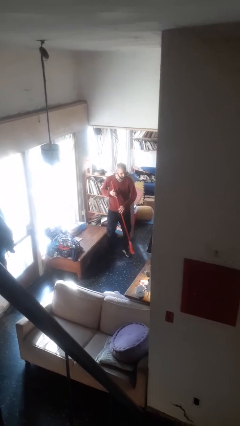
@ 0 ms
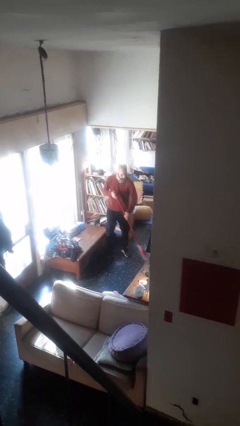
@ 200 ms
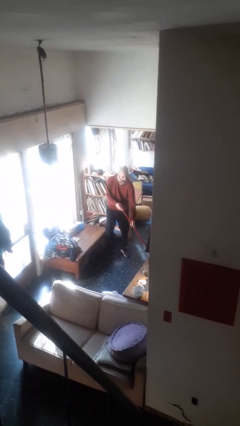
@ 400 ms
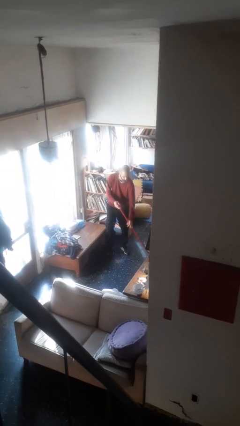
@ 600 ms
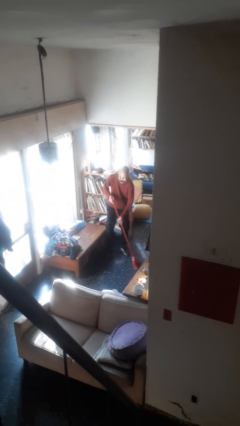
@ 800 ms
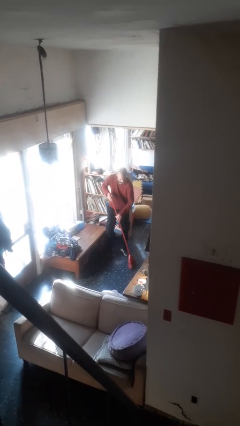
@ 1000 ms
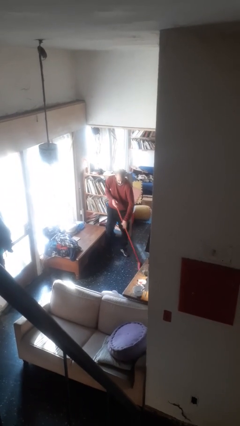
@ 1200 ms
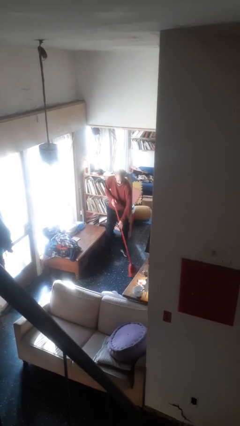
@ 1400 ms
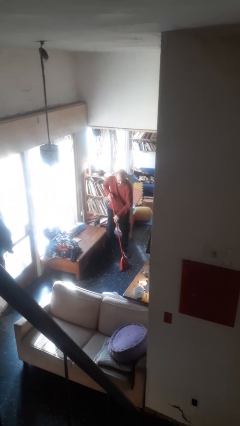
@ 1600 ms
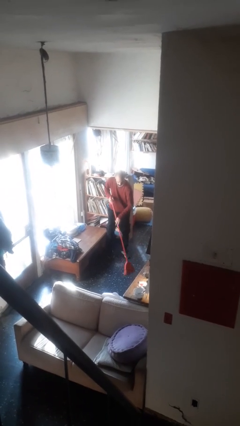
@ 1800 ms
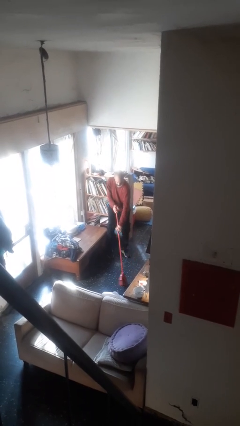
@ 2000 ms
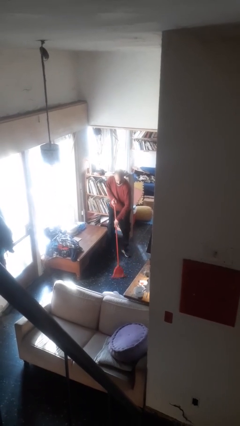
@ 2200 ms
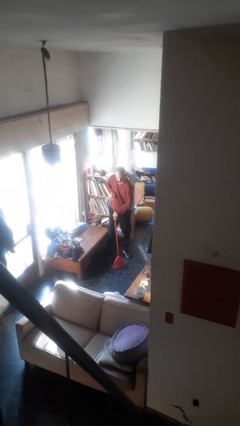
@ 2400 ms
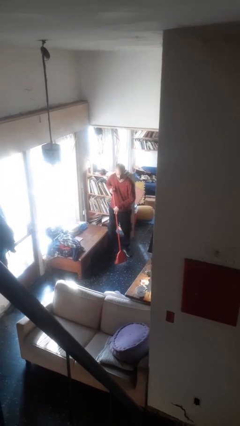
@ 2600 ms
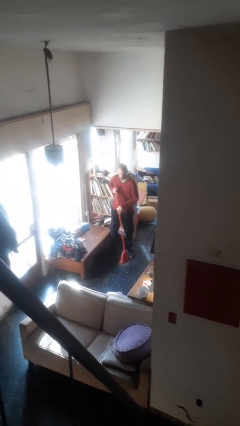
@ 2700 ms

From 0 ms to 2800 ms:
person sweeps floor

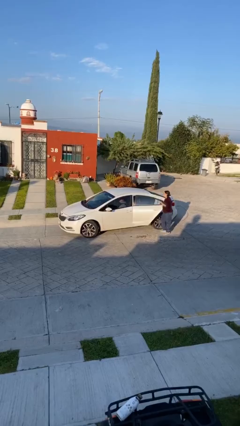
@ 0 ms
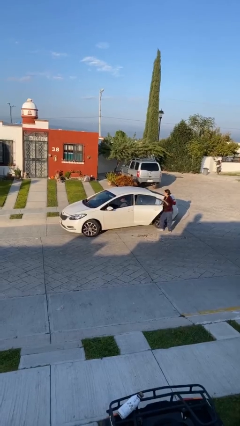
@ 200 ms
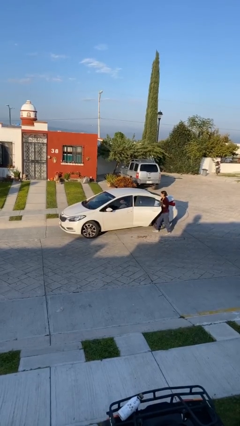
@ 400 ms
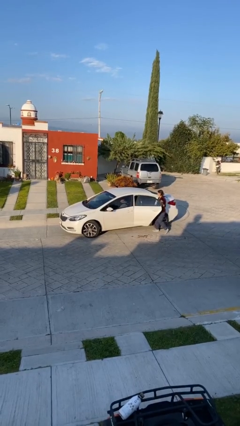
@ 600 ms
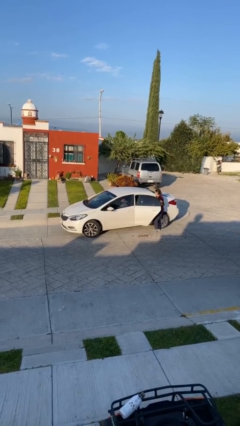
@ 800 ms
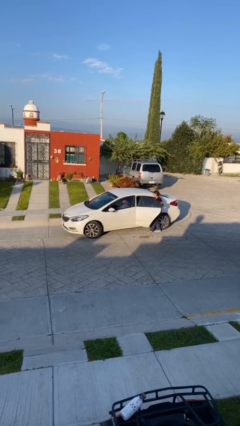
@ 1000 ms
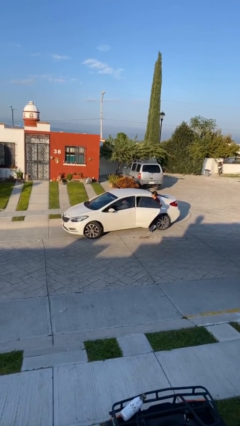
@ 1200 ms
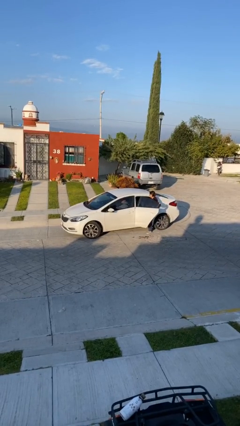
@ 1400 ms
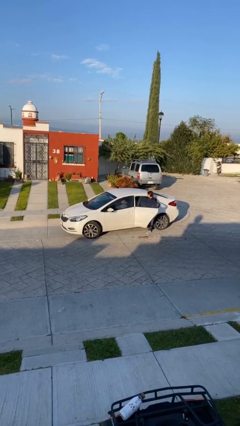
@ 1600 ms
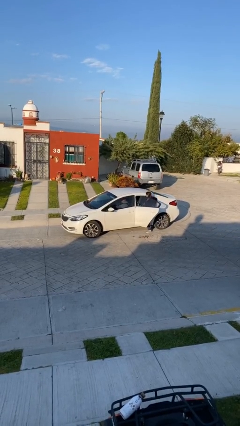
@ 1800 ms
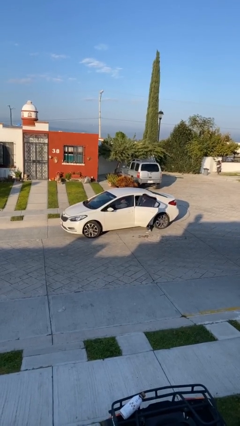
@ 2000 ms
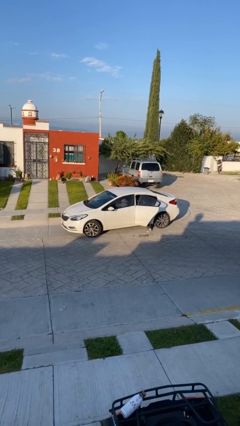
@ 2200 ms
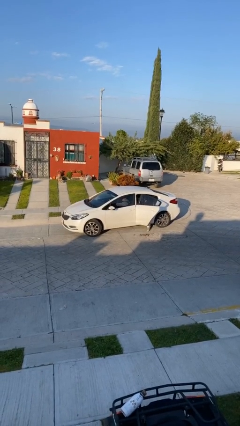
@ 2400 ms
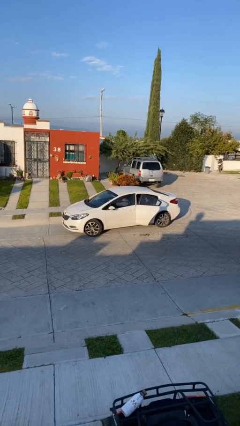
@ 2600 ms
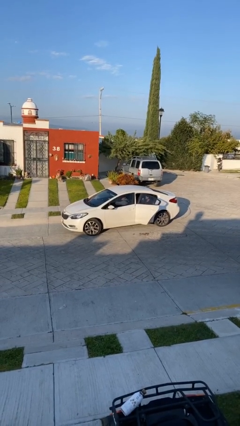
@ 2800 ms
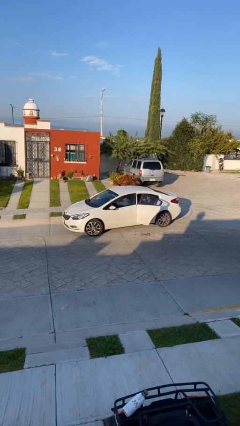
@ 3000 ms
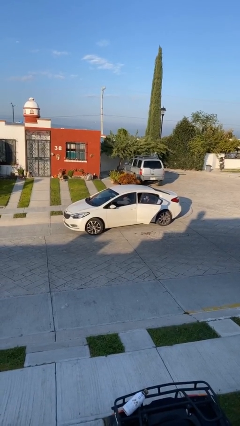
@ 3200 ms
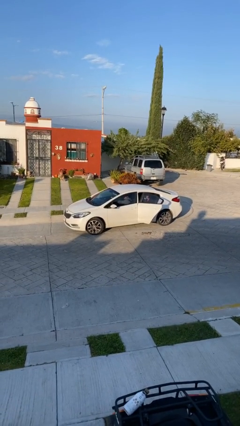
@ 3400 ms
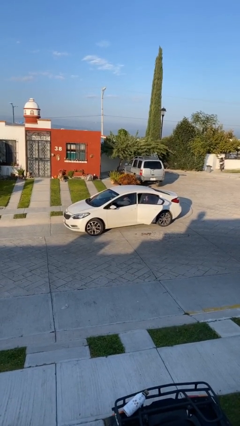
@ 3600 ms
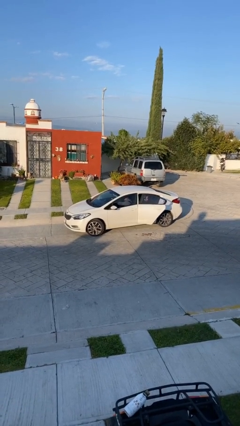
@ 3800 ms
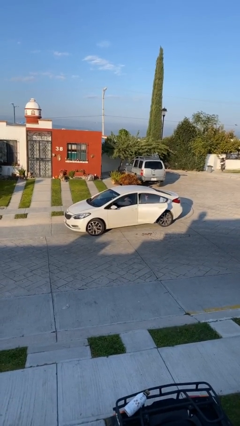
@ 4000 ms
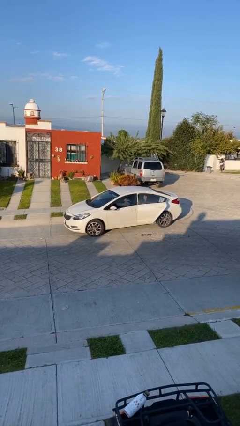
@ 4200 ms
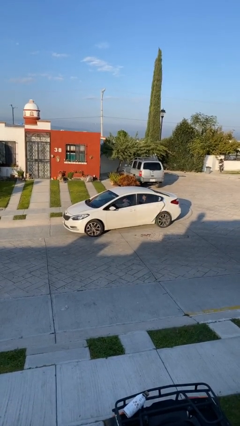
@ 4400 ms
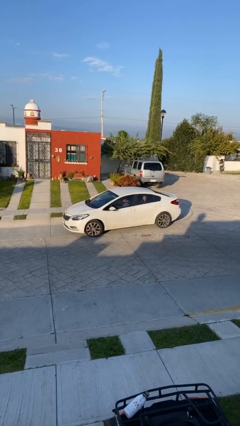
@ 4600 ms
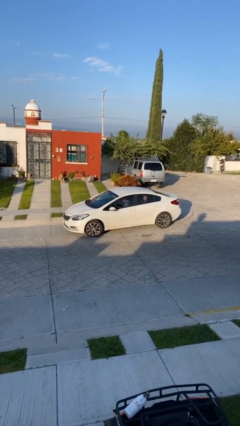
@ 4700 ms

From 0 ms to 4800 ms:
car picks up person

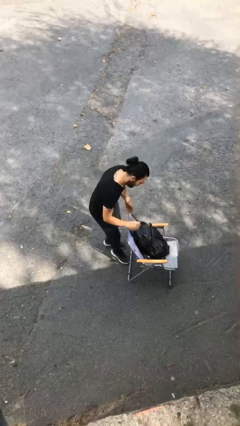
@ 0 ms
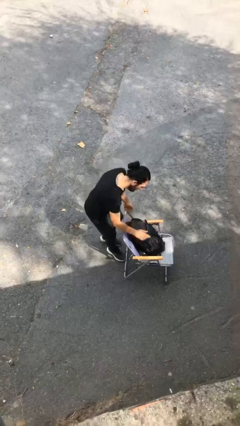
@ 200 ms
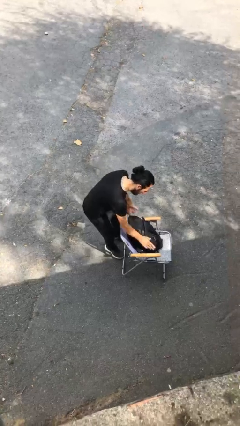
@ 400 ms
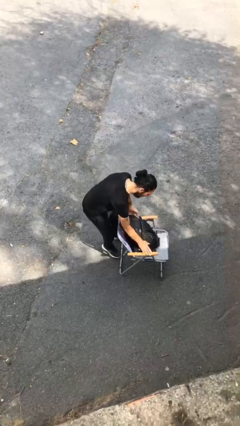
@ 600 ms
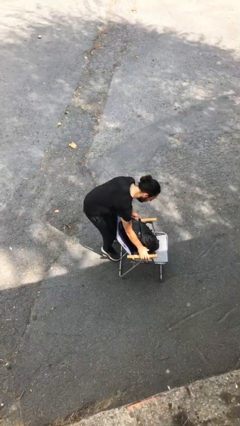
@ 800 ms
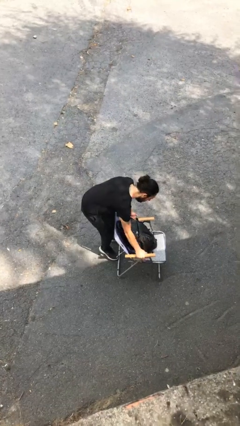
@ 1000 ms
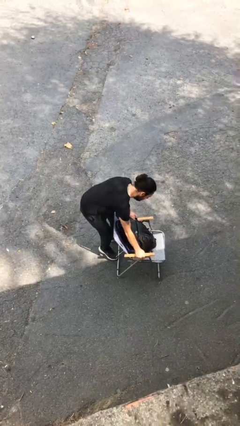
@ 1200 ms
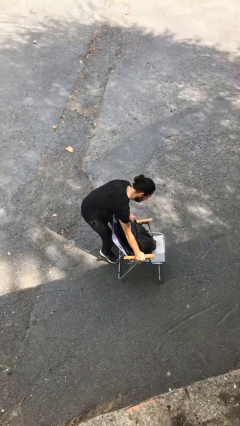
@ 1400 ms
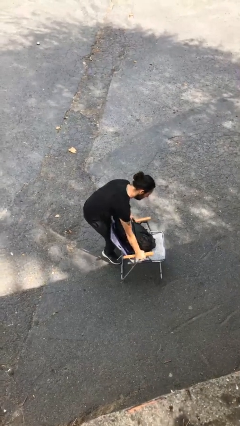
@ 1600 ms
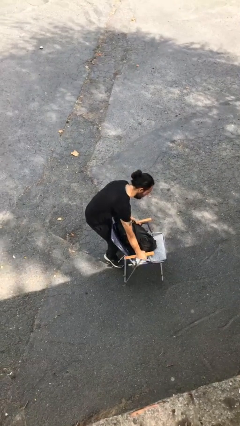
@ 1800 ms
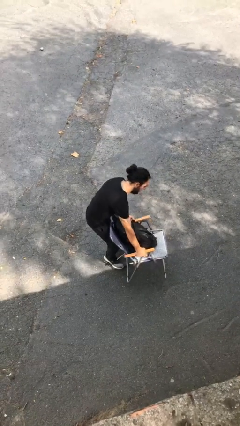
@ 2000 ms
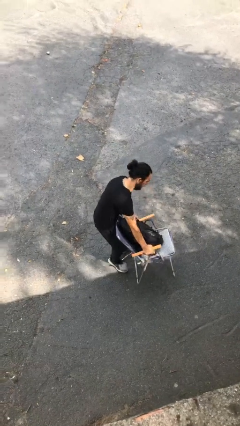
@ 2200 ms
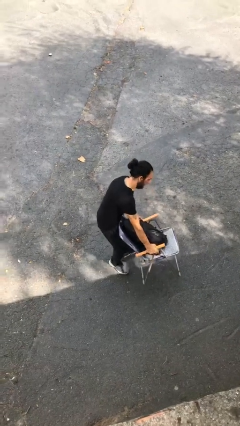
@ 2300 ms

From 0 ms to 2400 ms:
person picks up object from floor

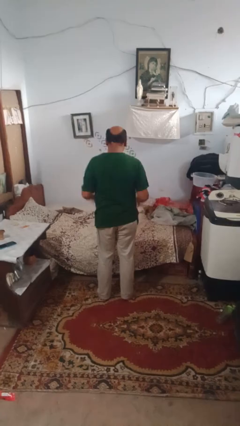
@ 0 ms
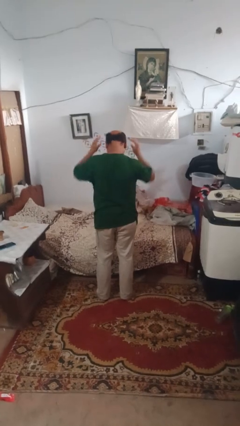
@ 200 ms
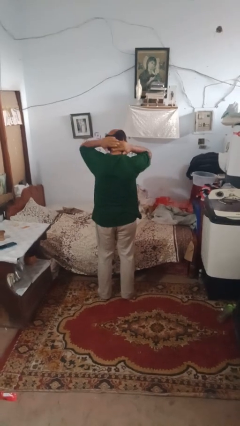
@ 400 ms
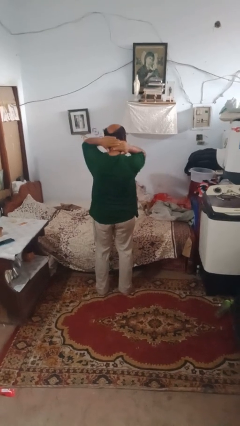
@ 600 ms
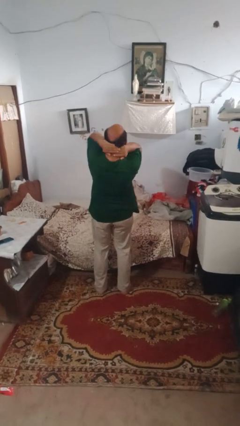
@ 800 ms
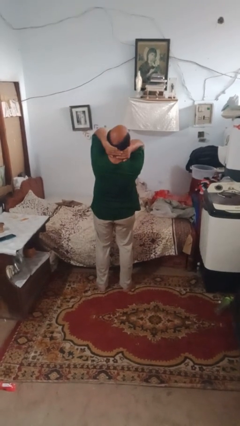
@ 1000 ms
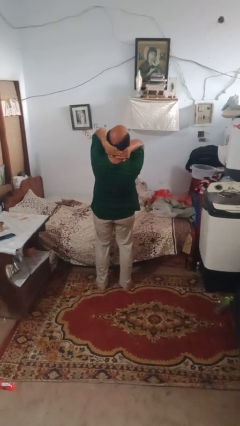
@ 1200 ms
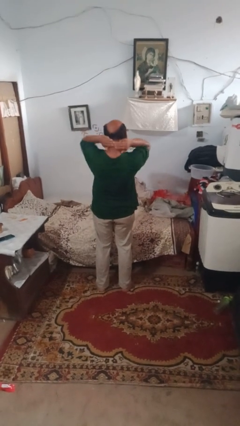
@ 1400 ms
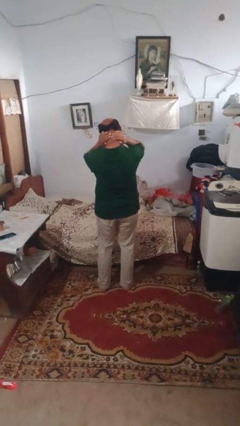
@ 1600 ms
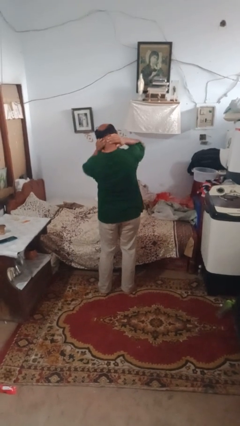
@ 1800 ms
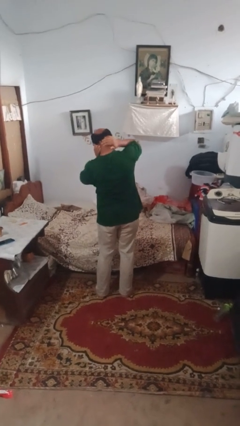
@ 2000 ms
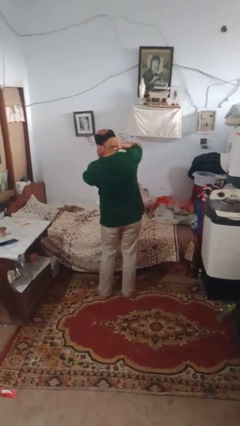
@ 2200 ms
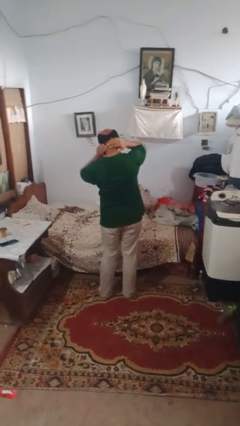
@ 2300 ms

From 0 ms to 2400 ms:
person rubs neck

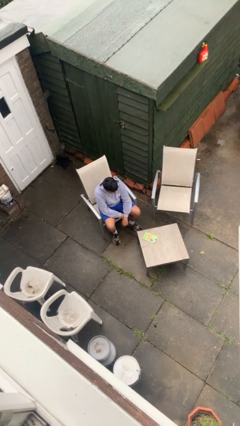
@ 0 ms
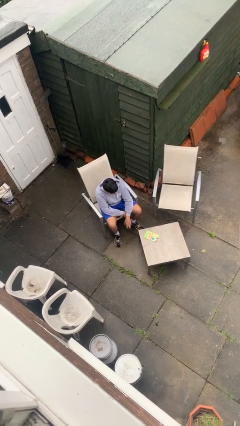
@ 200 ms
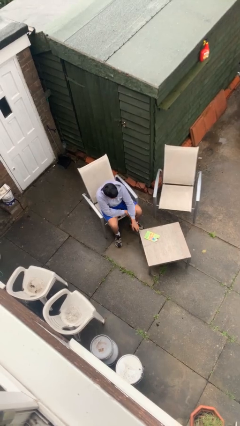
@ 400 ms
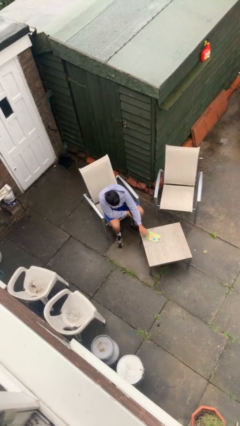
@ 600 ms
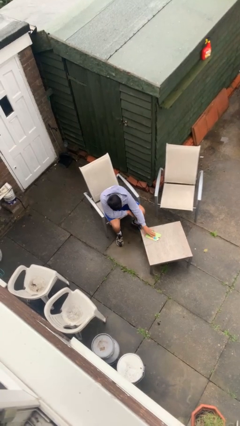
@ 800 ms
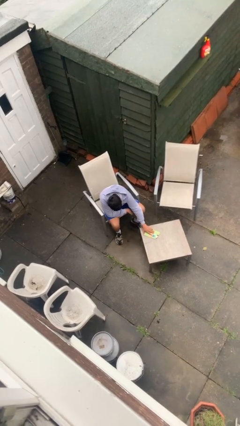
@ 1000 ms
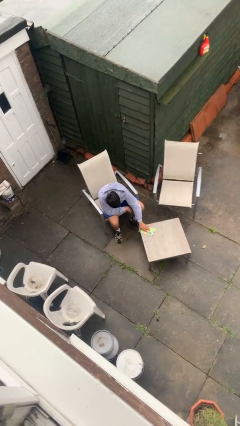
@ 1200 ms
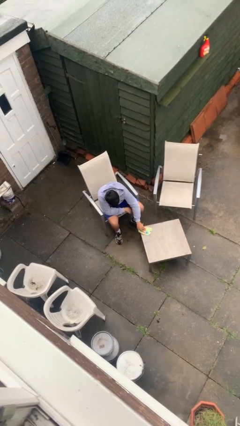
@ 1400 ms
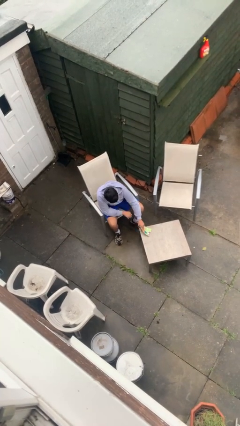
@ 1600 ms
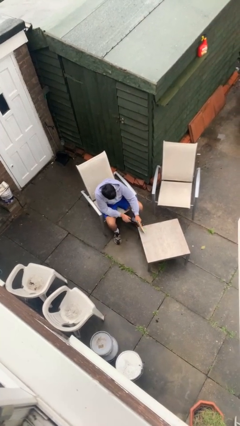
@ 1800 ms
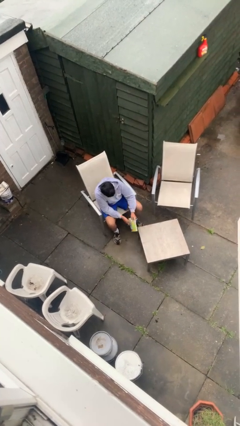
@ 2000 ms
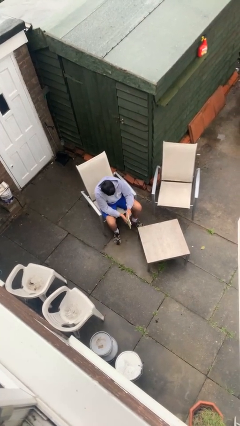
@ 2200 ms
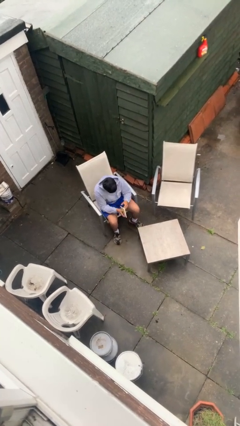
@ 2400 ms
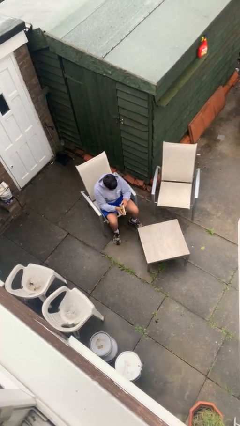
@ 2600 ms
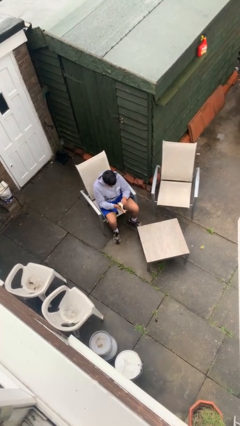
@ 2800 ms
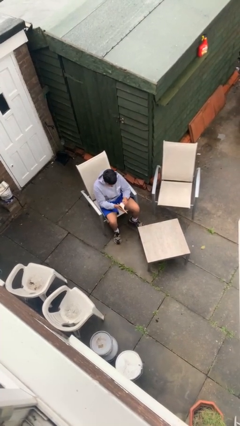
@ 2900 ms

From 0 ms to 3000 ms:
person picks up object from table

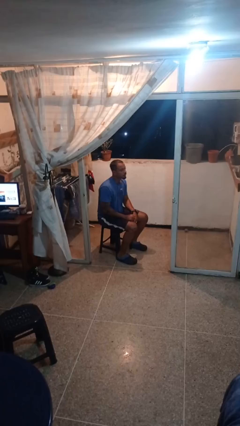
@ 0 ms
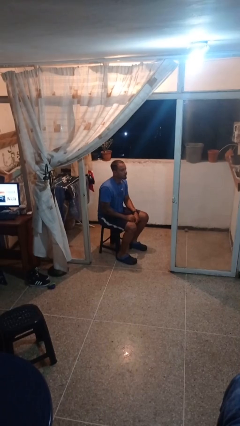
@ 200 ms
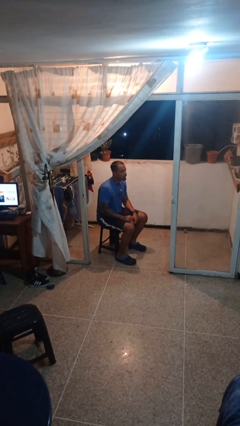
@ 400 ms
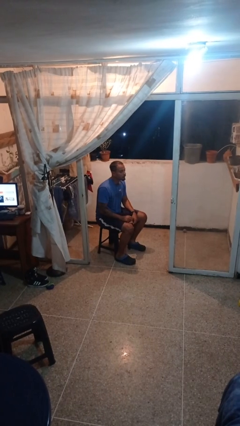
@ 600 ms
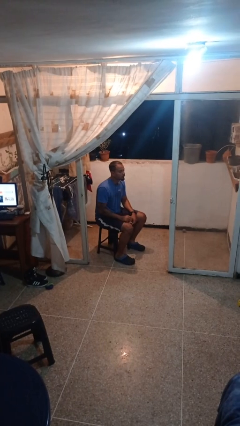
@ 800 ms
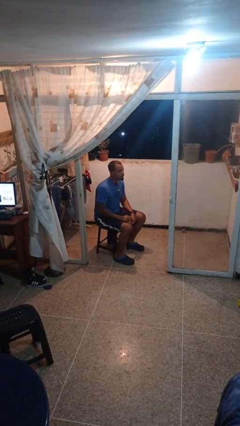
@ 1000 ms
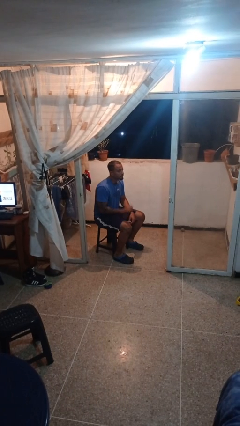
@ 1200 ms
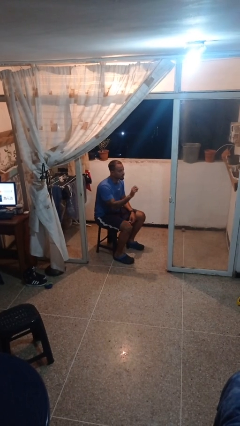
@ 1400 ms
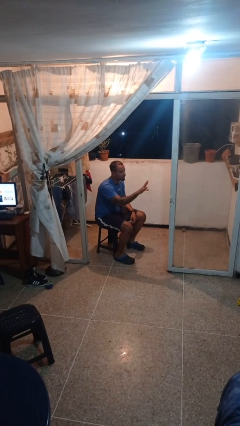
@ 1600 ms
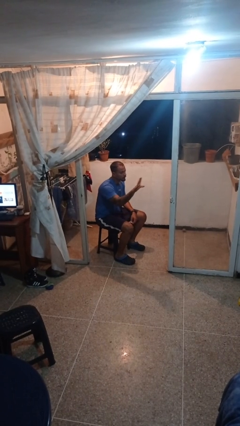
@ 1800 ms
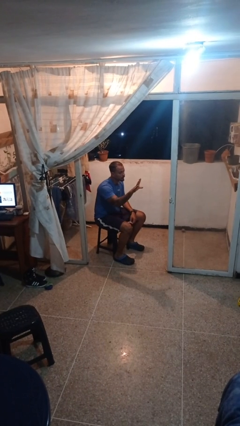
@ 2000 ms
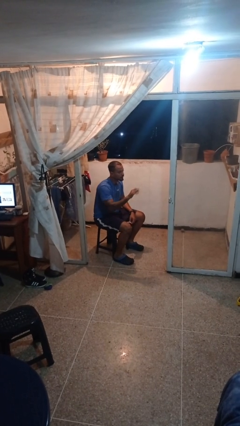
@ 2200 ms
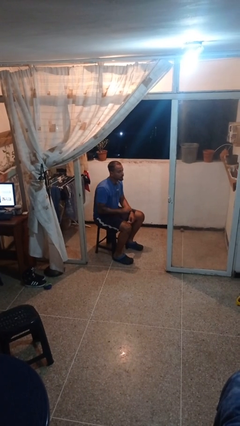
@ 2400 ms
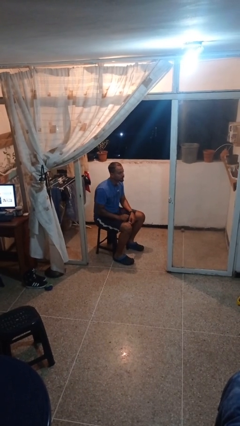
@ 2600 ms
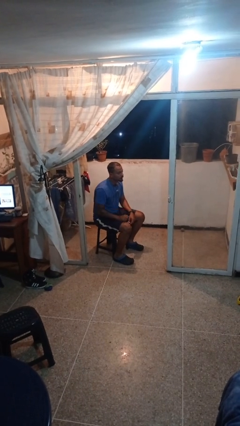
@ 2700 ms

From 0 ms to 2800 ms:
person gestures zoom in
